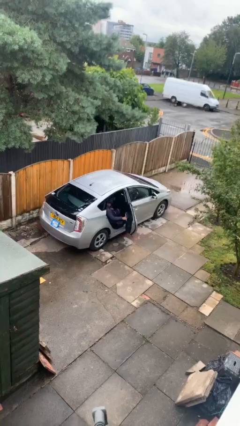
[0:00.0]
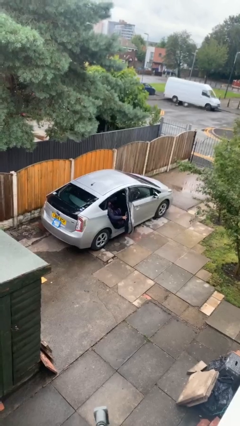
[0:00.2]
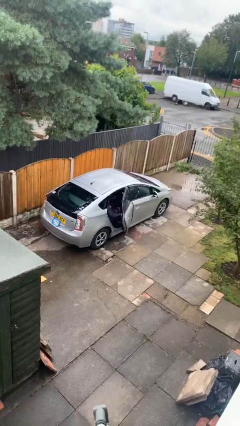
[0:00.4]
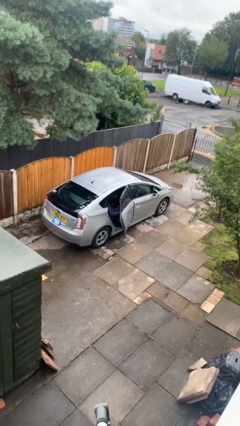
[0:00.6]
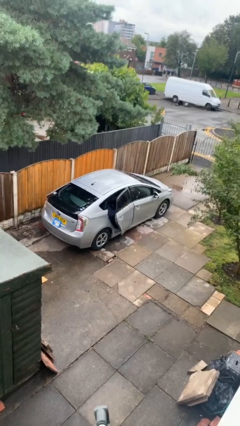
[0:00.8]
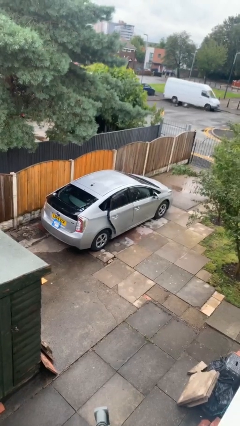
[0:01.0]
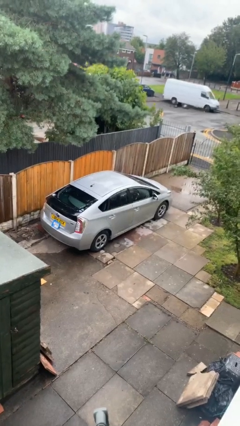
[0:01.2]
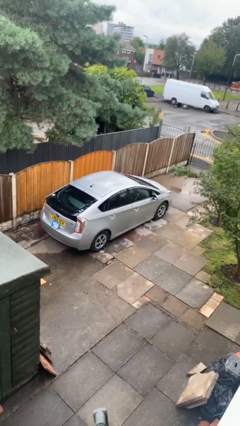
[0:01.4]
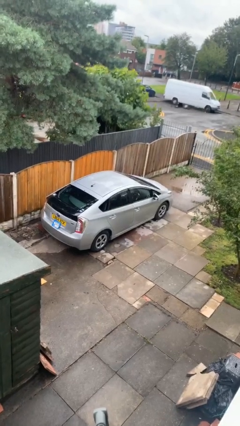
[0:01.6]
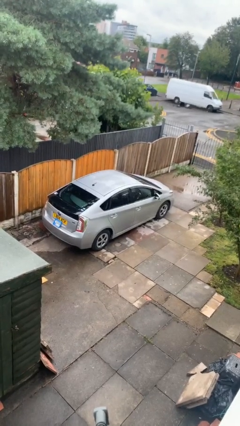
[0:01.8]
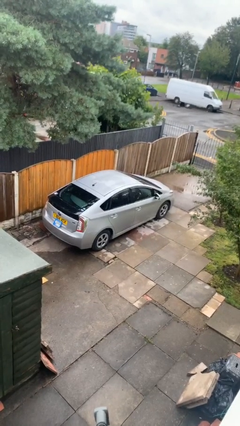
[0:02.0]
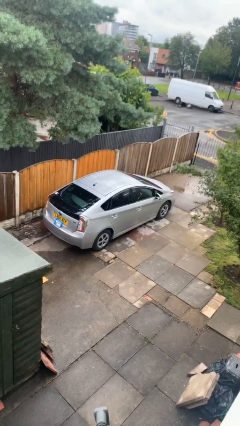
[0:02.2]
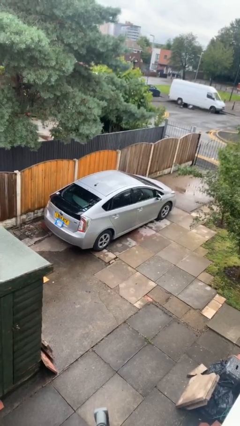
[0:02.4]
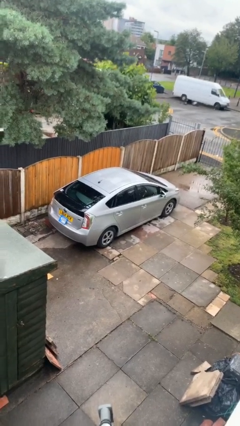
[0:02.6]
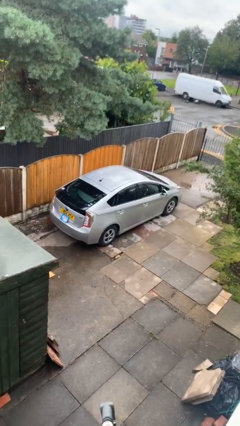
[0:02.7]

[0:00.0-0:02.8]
person closes car door

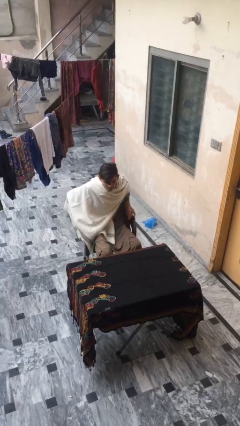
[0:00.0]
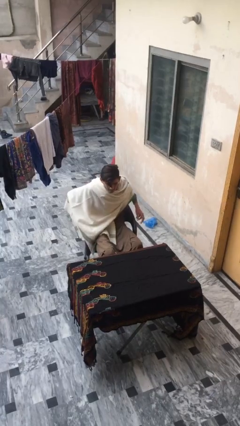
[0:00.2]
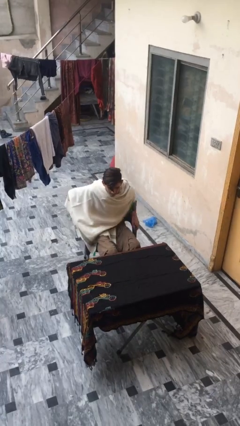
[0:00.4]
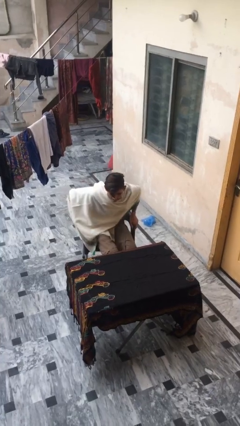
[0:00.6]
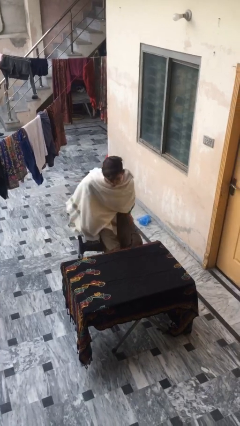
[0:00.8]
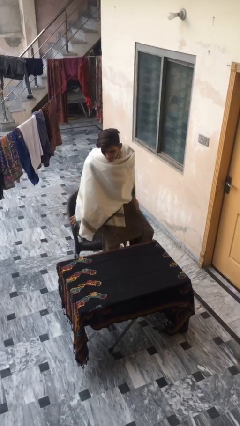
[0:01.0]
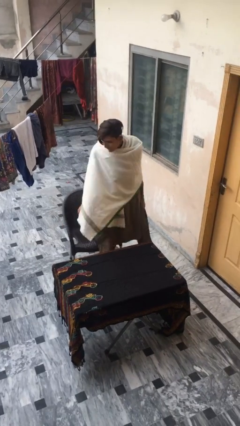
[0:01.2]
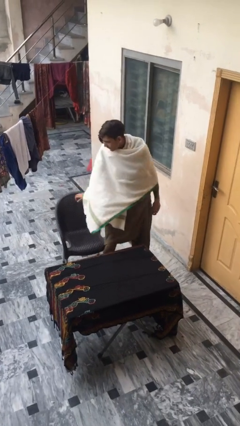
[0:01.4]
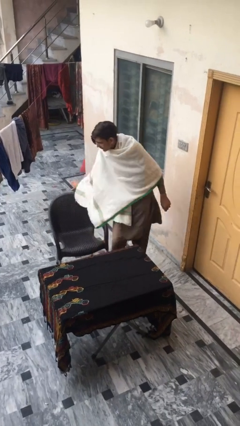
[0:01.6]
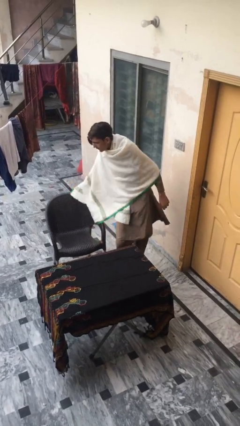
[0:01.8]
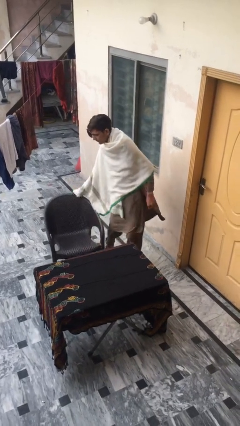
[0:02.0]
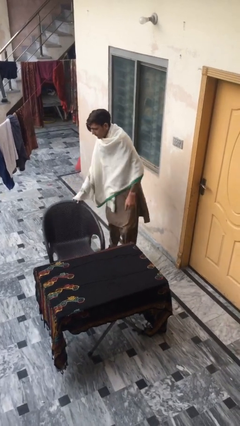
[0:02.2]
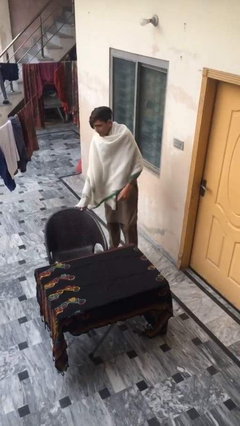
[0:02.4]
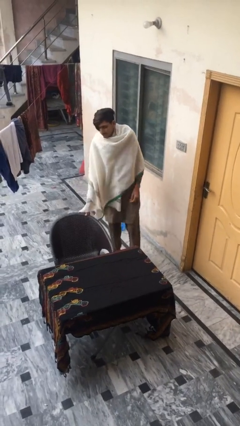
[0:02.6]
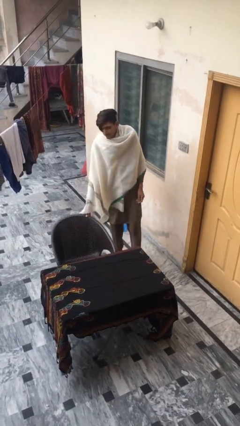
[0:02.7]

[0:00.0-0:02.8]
person stands up

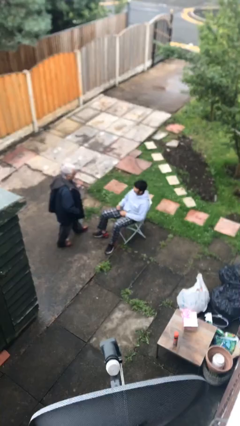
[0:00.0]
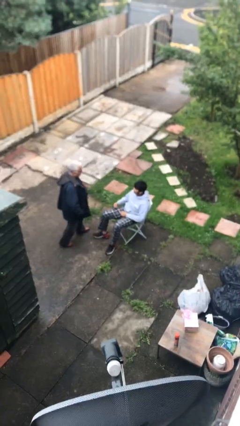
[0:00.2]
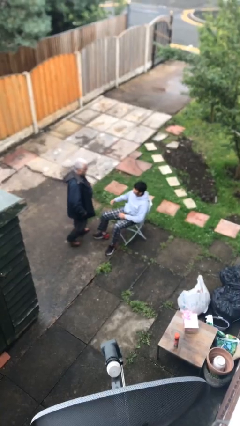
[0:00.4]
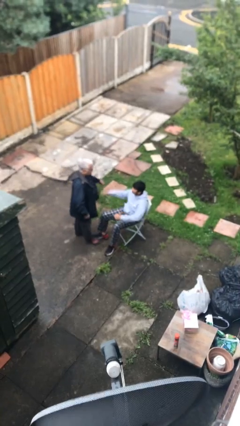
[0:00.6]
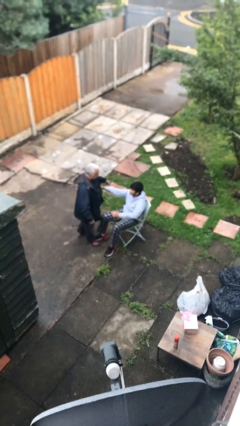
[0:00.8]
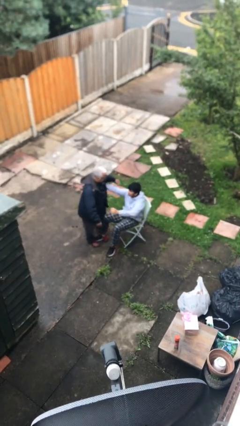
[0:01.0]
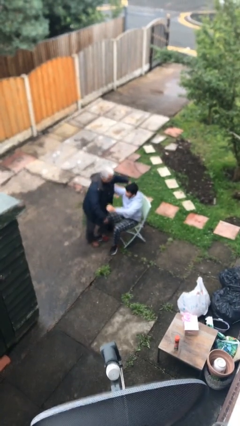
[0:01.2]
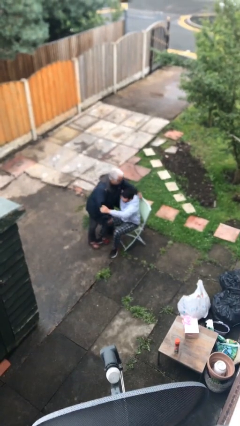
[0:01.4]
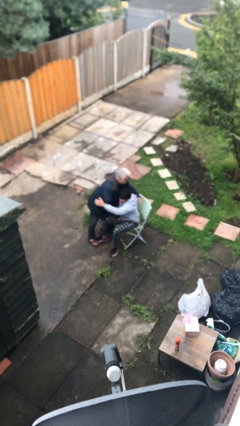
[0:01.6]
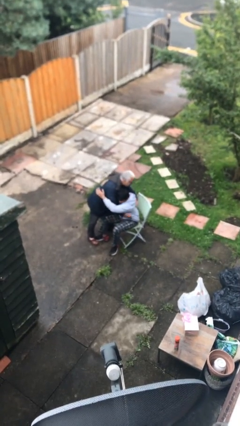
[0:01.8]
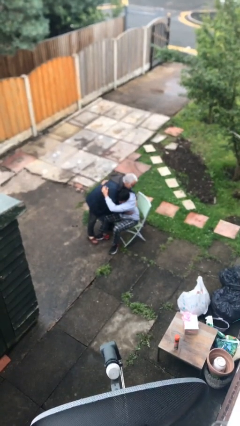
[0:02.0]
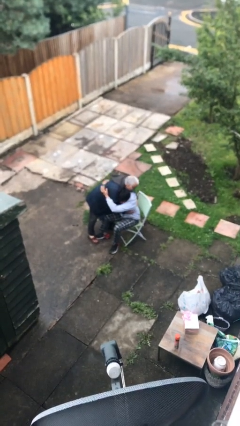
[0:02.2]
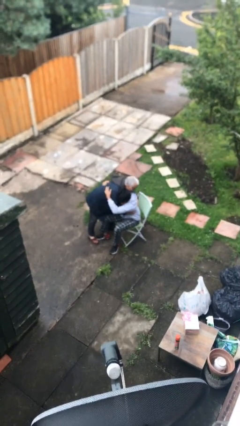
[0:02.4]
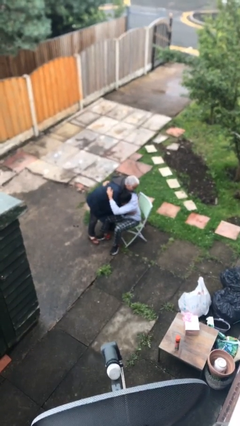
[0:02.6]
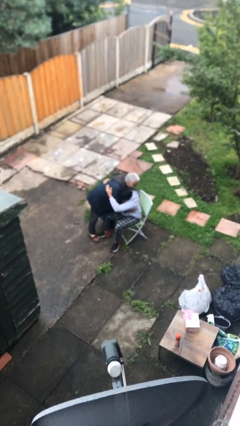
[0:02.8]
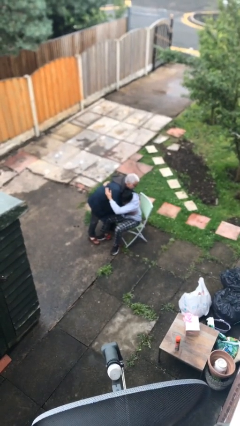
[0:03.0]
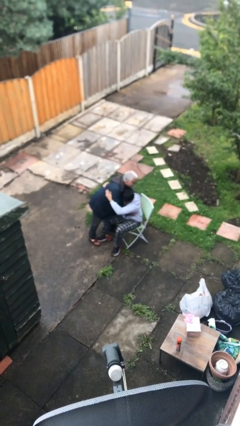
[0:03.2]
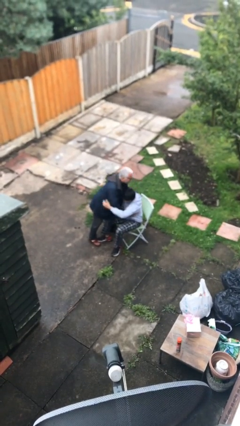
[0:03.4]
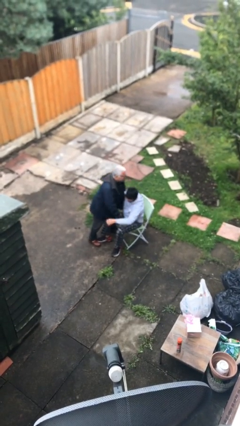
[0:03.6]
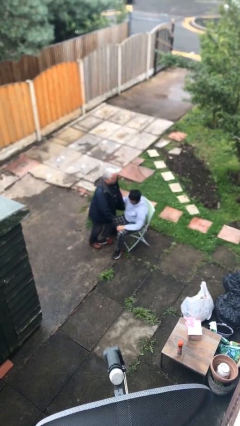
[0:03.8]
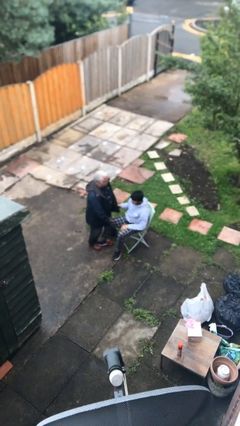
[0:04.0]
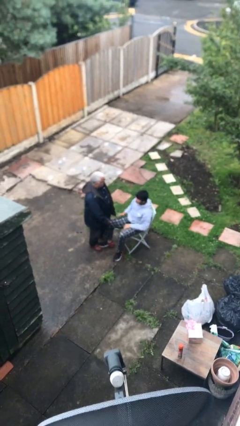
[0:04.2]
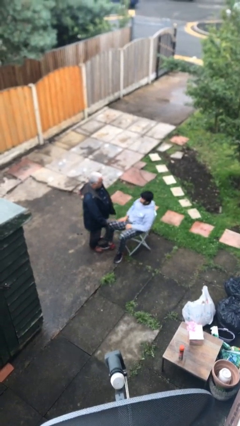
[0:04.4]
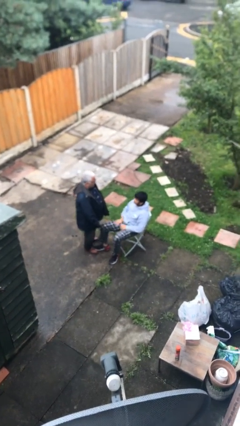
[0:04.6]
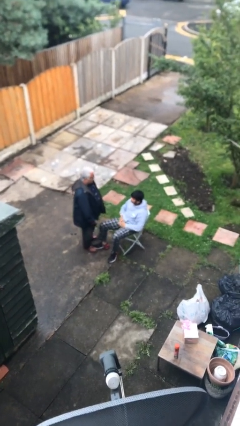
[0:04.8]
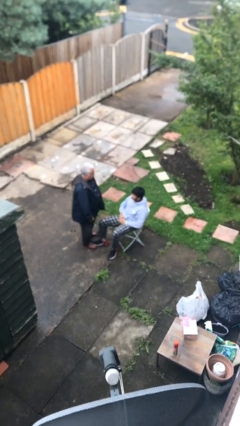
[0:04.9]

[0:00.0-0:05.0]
person embraces person

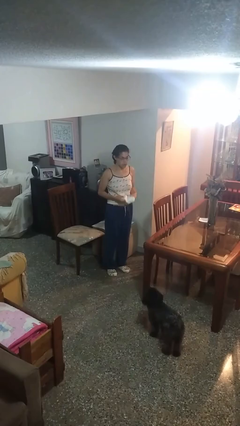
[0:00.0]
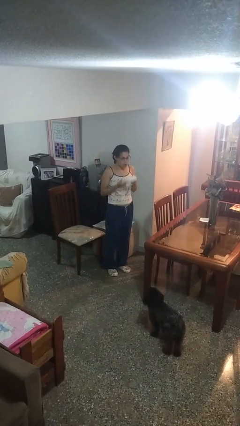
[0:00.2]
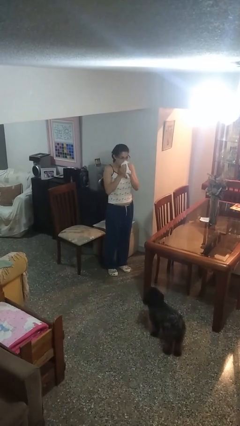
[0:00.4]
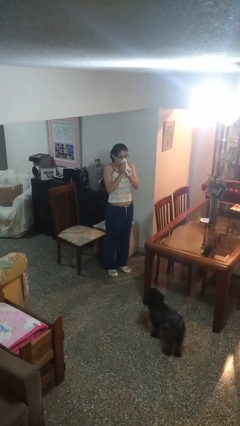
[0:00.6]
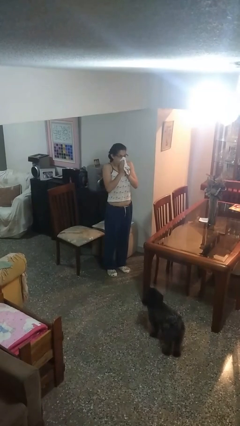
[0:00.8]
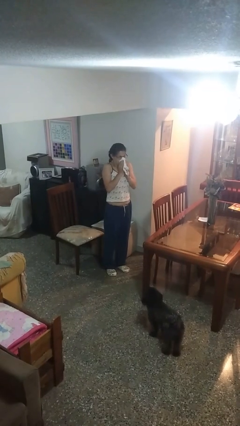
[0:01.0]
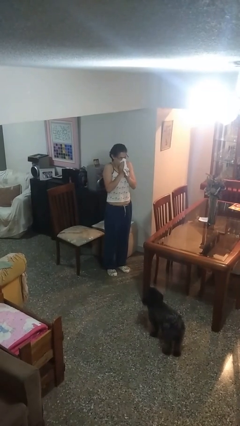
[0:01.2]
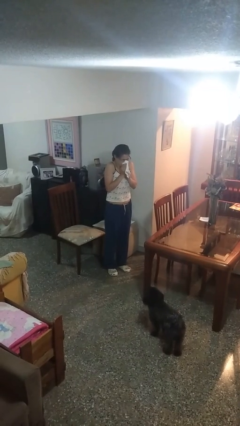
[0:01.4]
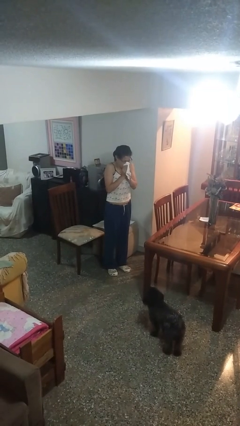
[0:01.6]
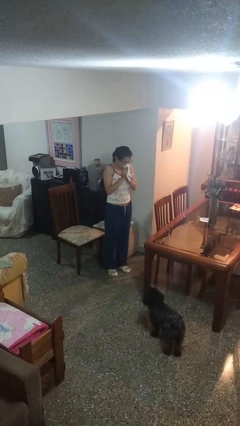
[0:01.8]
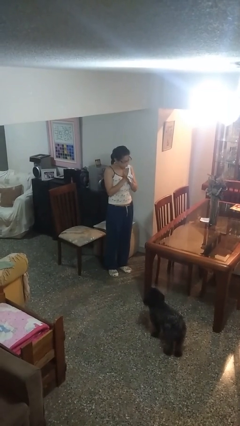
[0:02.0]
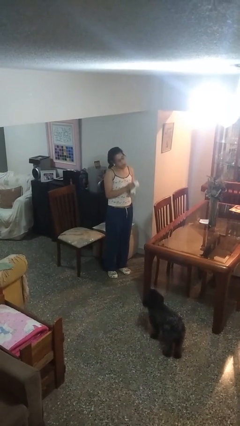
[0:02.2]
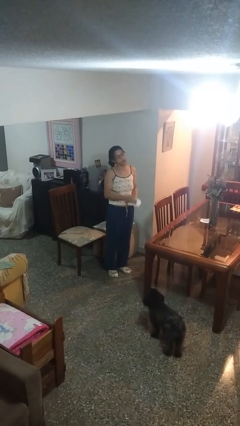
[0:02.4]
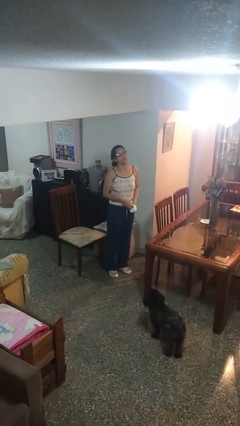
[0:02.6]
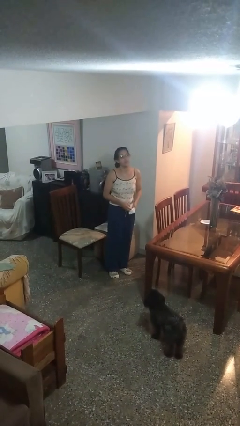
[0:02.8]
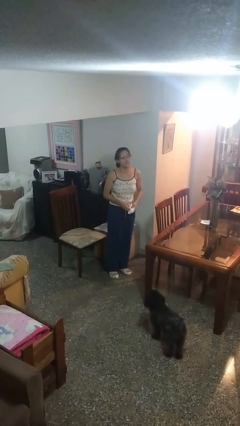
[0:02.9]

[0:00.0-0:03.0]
person blows nose

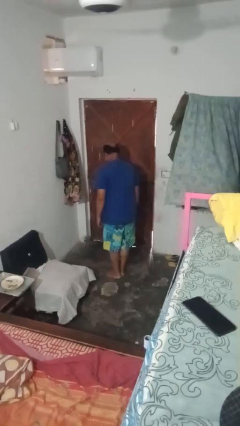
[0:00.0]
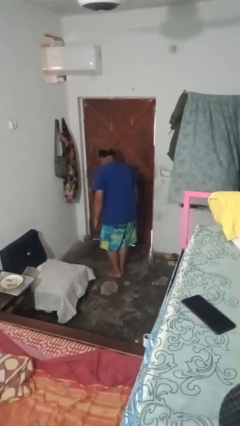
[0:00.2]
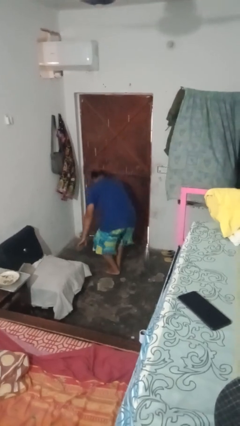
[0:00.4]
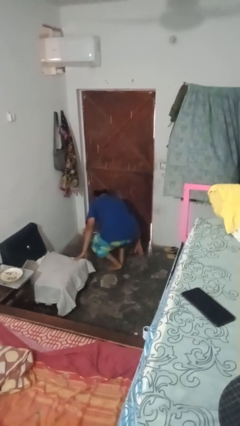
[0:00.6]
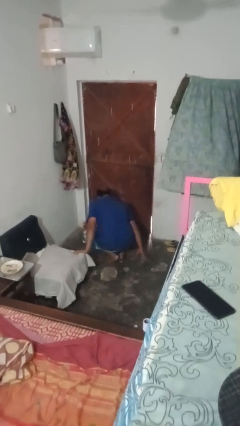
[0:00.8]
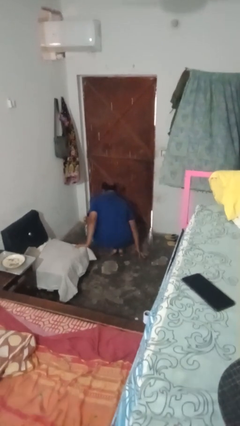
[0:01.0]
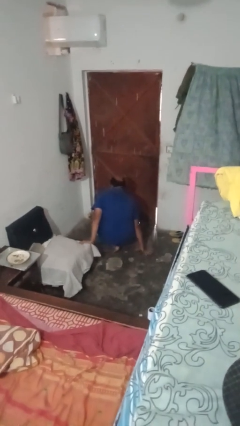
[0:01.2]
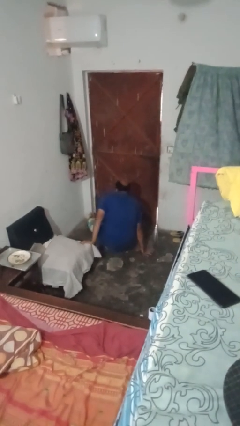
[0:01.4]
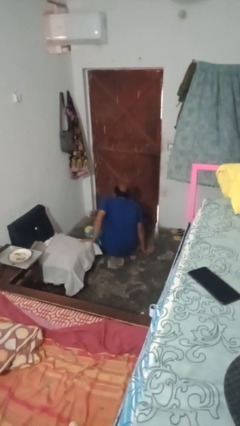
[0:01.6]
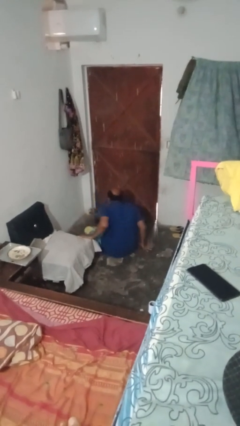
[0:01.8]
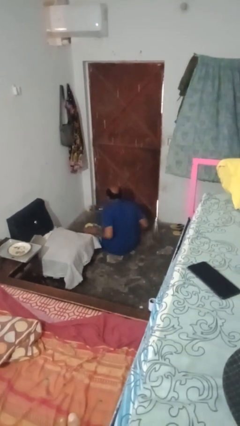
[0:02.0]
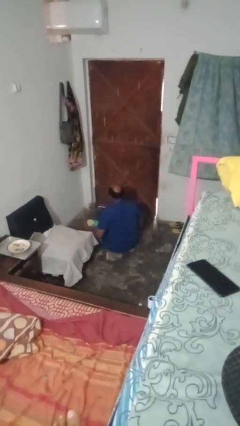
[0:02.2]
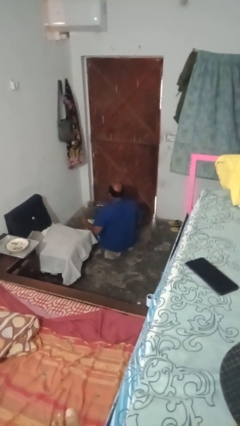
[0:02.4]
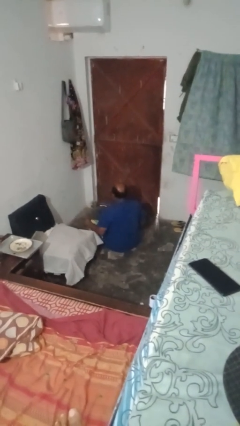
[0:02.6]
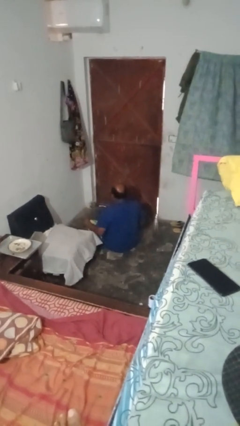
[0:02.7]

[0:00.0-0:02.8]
person crosses legs

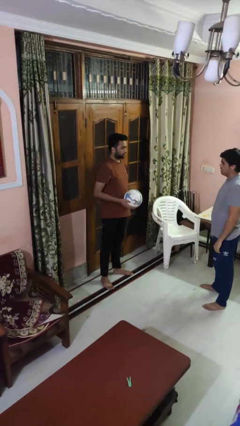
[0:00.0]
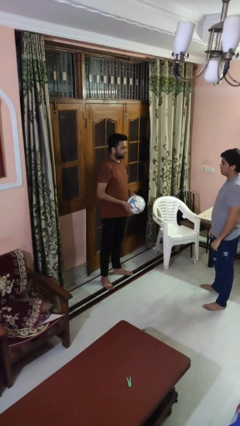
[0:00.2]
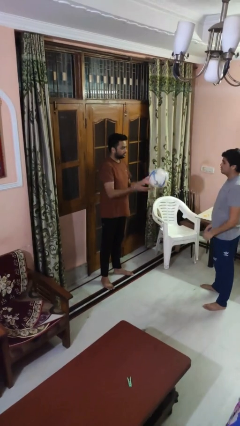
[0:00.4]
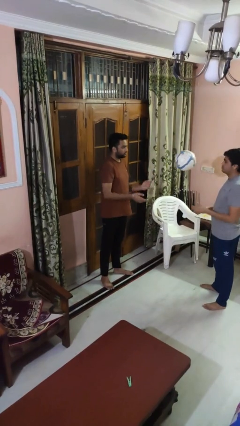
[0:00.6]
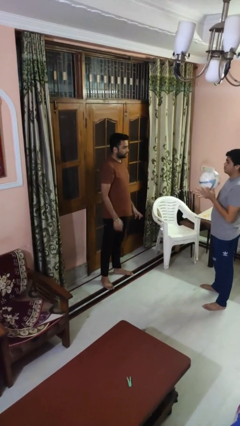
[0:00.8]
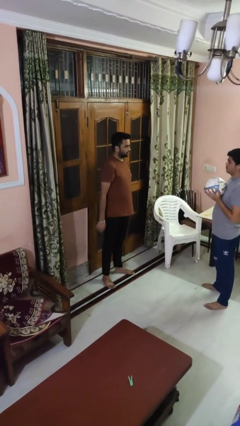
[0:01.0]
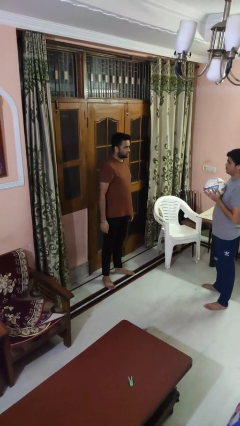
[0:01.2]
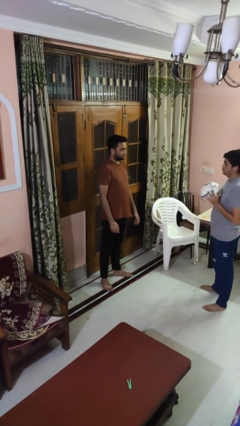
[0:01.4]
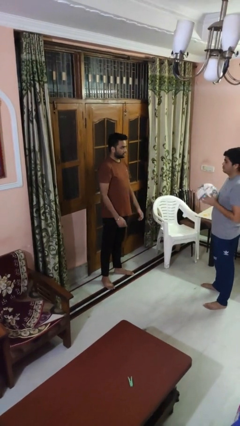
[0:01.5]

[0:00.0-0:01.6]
person throws object to person
